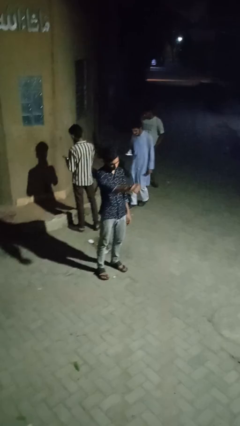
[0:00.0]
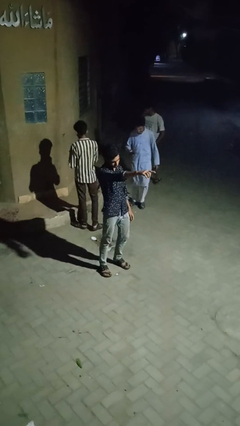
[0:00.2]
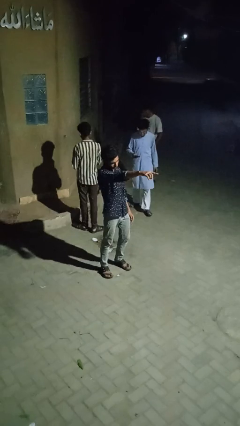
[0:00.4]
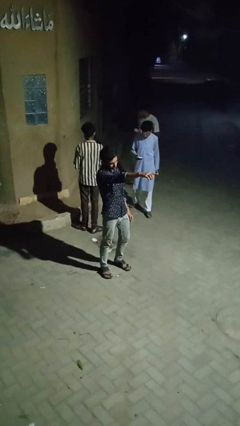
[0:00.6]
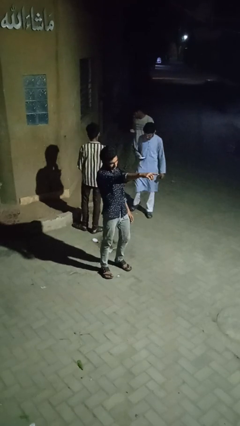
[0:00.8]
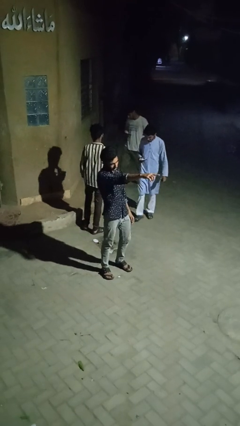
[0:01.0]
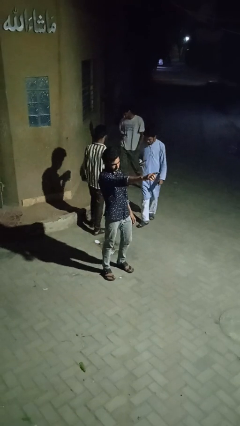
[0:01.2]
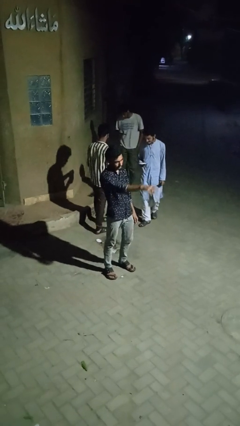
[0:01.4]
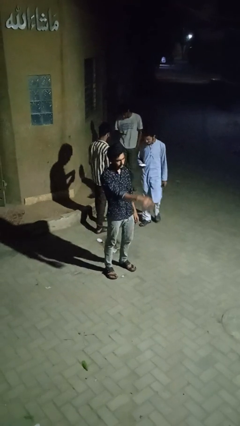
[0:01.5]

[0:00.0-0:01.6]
person points at person

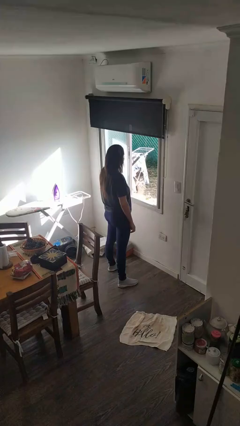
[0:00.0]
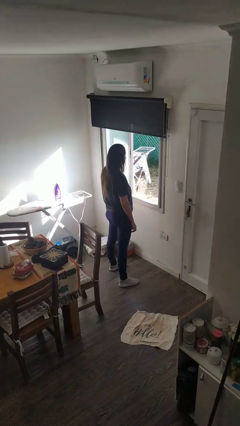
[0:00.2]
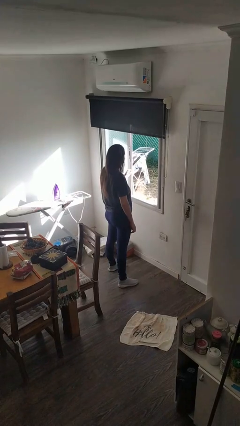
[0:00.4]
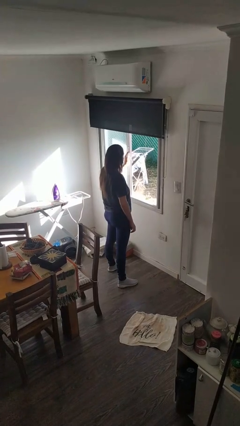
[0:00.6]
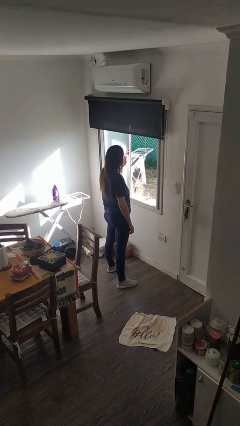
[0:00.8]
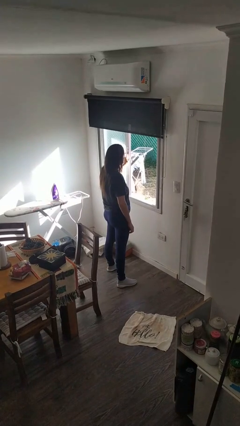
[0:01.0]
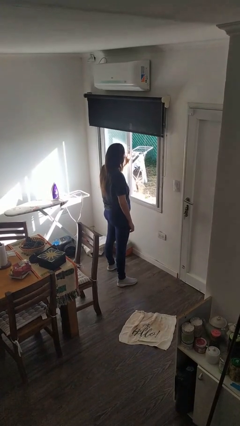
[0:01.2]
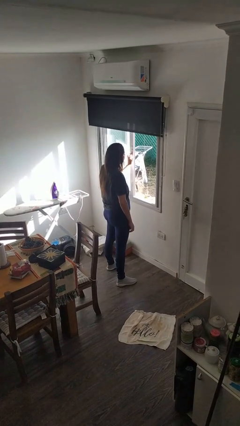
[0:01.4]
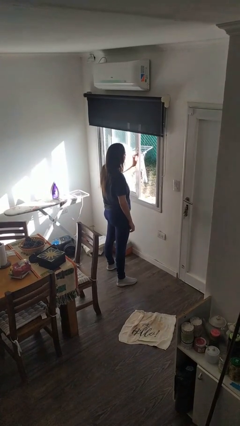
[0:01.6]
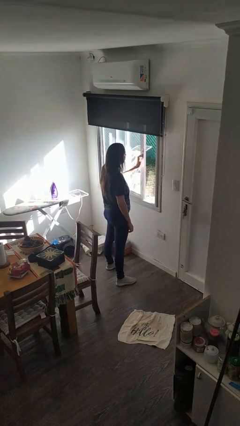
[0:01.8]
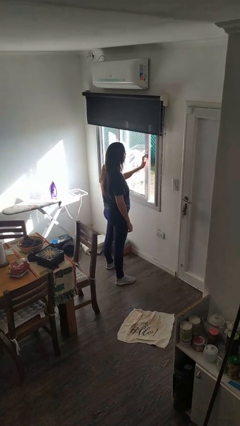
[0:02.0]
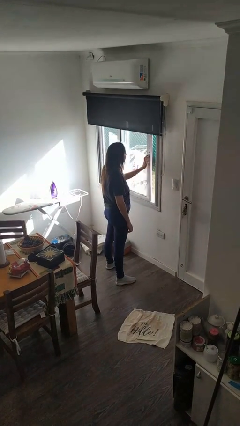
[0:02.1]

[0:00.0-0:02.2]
person closes home window

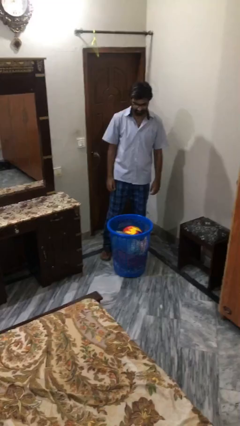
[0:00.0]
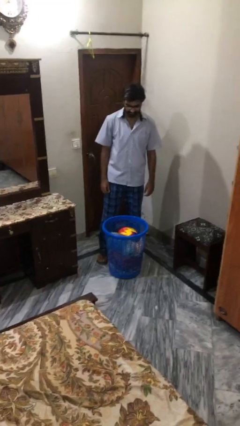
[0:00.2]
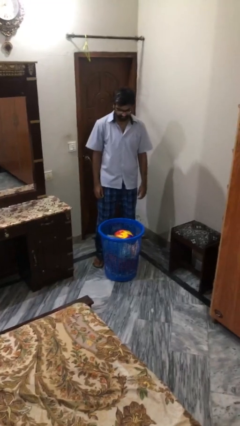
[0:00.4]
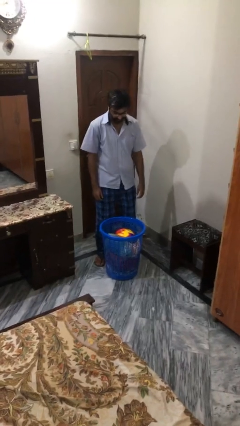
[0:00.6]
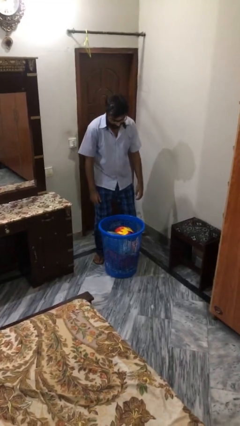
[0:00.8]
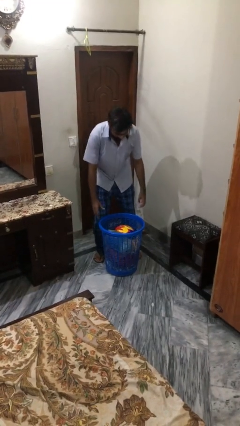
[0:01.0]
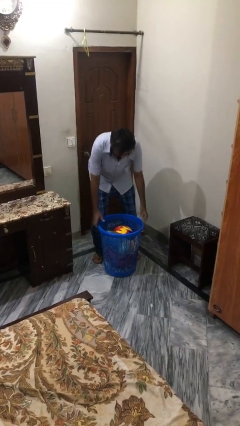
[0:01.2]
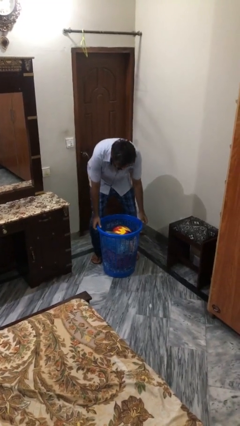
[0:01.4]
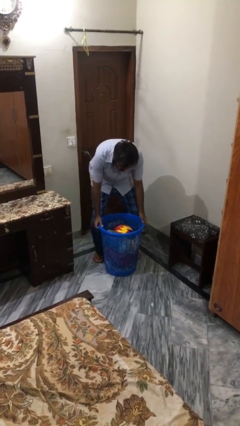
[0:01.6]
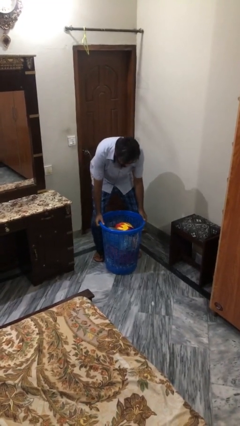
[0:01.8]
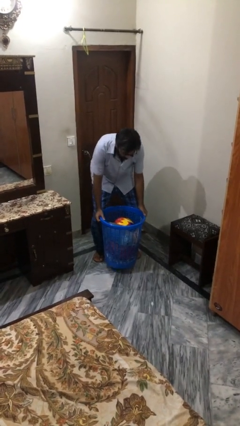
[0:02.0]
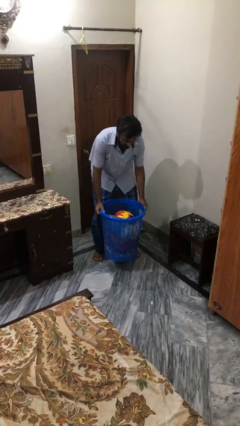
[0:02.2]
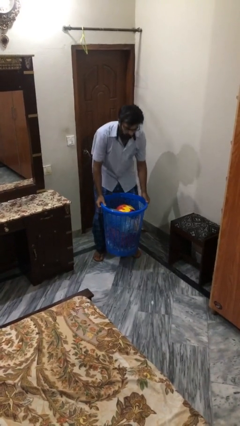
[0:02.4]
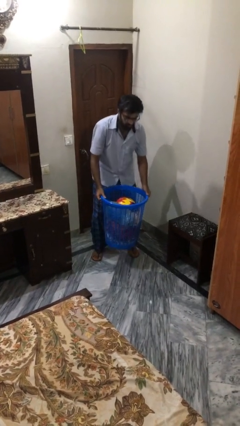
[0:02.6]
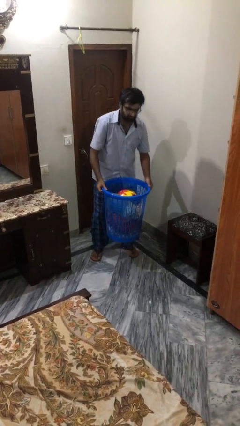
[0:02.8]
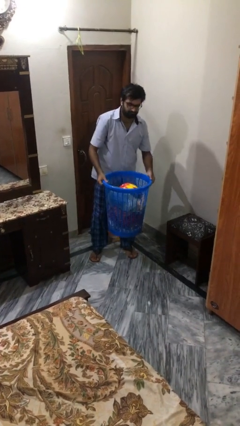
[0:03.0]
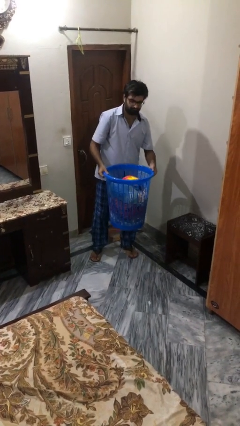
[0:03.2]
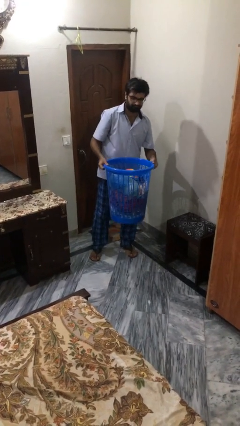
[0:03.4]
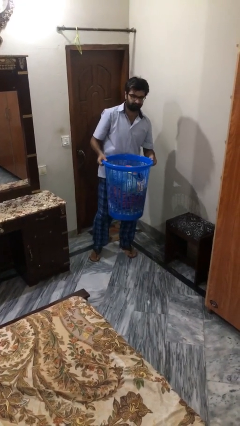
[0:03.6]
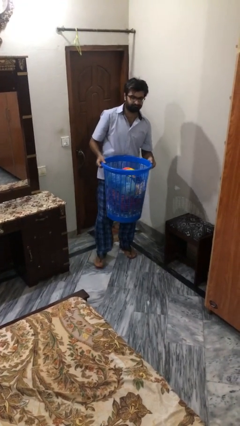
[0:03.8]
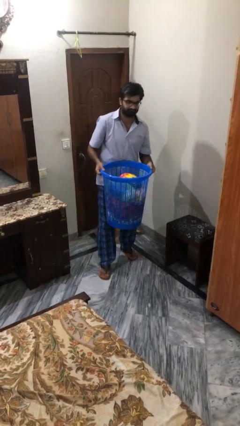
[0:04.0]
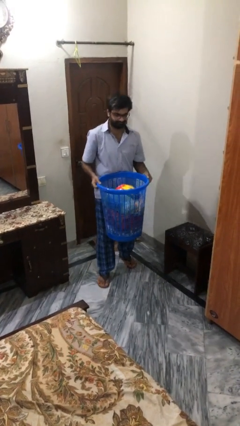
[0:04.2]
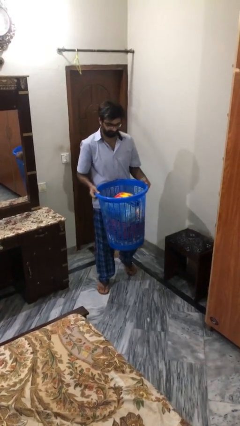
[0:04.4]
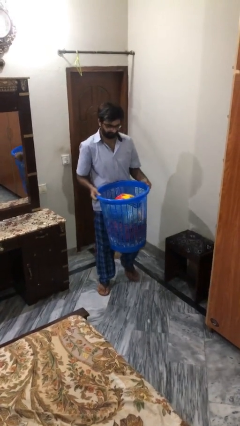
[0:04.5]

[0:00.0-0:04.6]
person picks up object from floor

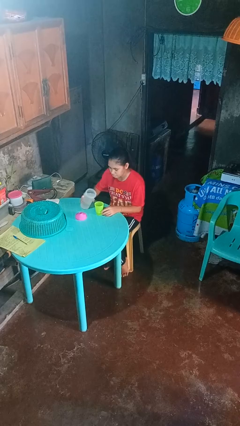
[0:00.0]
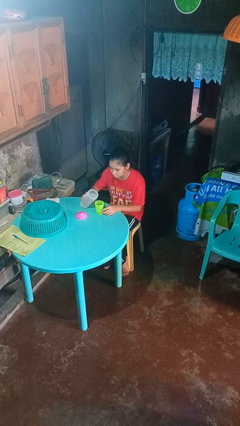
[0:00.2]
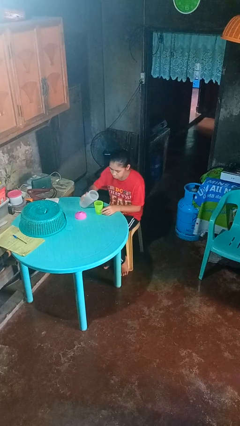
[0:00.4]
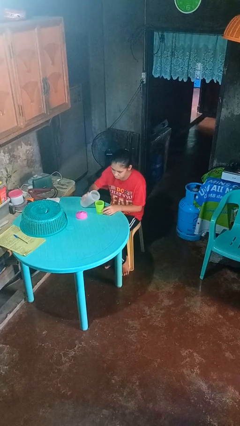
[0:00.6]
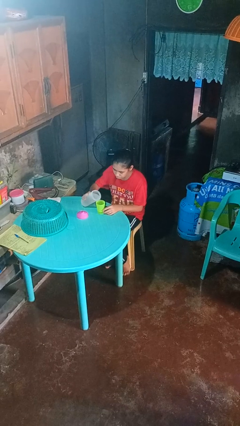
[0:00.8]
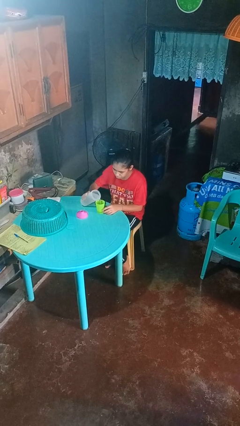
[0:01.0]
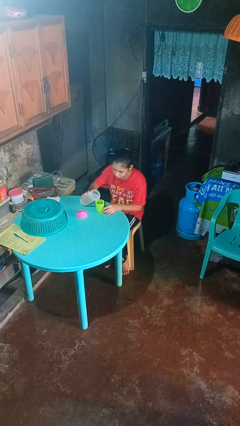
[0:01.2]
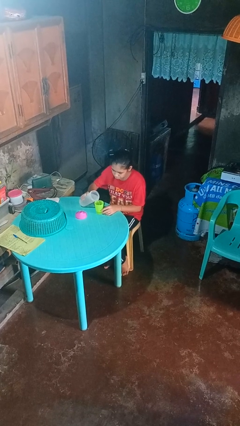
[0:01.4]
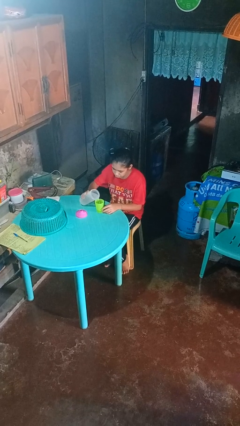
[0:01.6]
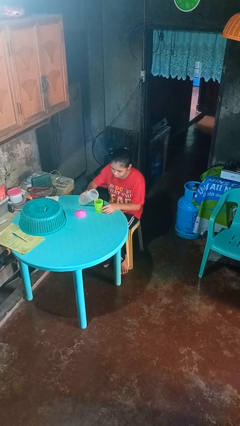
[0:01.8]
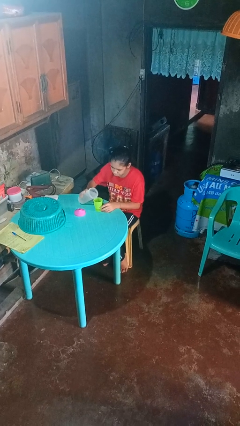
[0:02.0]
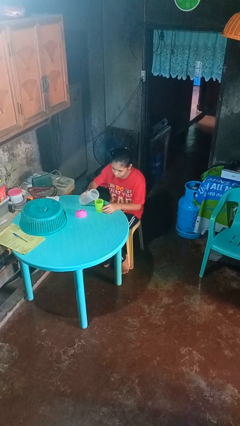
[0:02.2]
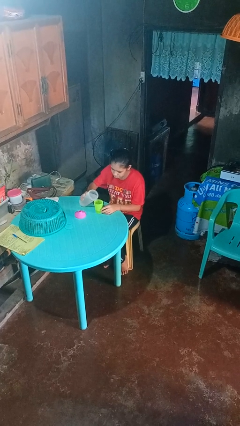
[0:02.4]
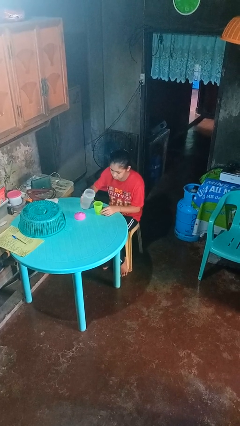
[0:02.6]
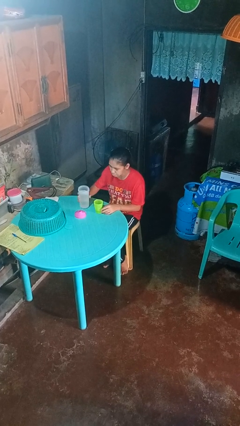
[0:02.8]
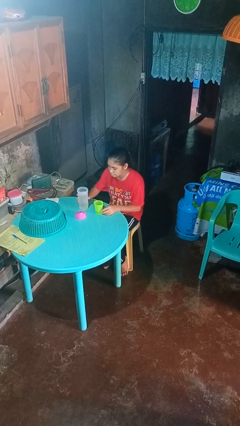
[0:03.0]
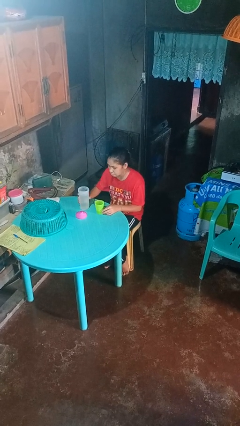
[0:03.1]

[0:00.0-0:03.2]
person pours liquid into cup

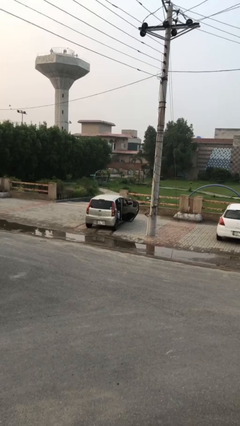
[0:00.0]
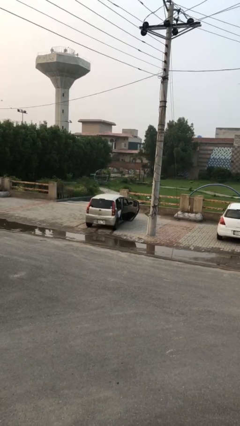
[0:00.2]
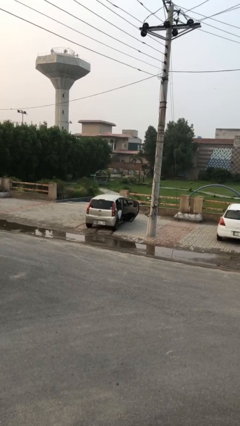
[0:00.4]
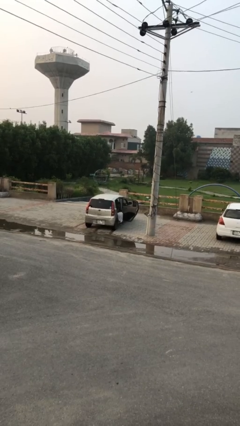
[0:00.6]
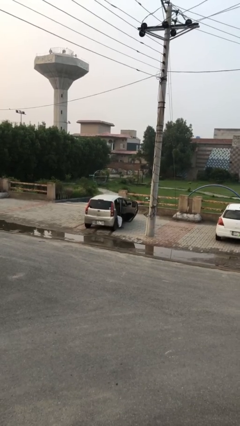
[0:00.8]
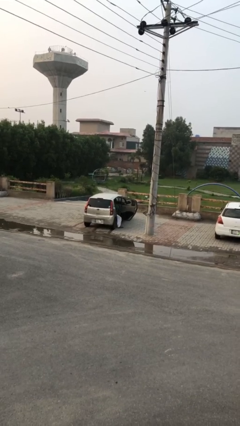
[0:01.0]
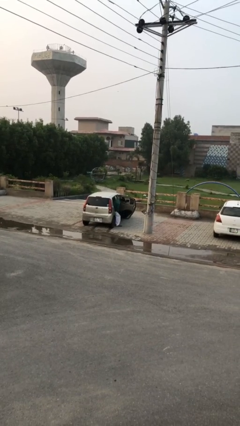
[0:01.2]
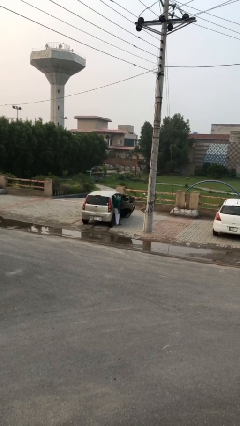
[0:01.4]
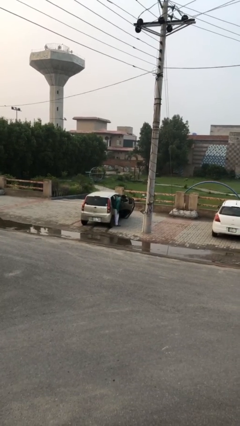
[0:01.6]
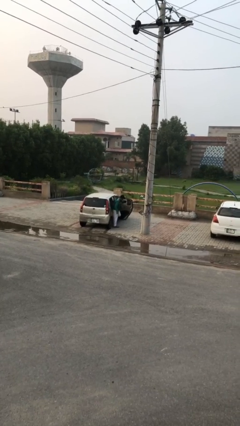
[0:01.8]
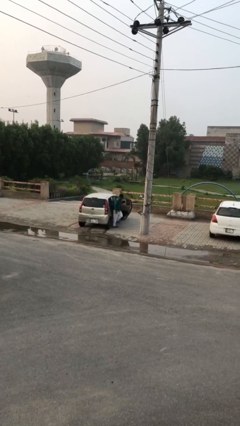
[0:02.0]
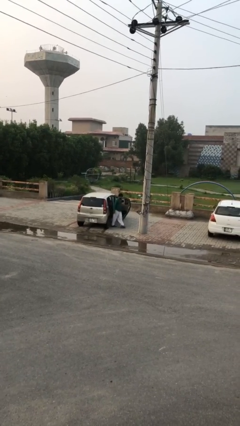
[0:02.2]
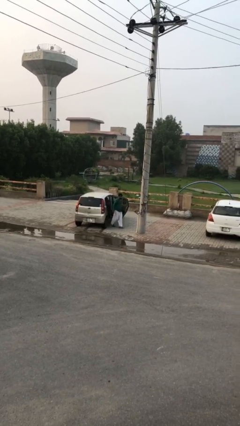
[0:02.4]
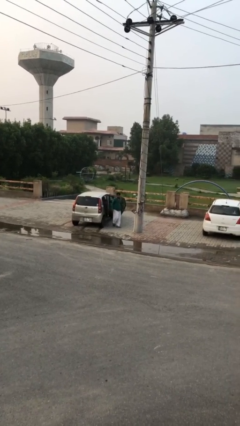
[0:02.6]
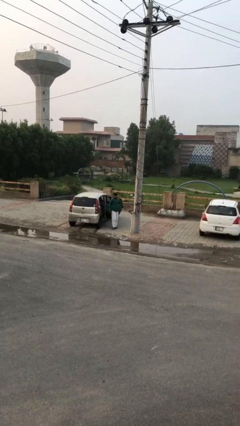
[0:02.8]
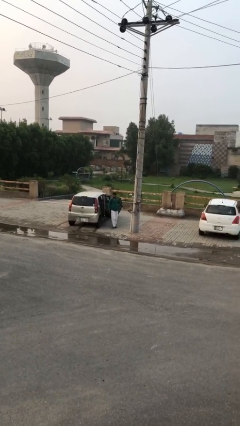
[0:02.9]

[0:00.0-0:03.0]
person exits car

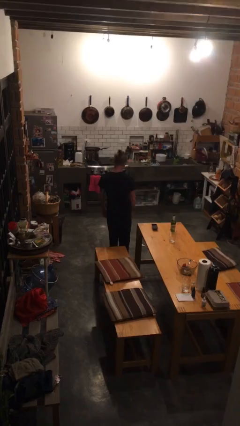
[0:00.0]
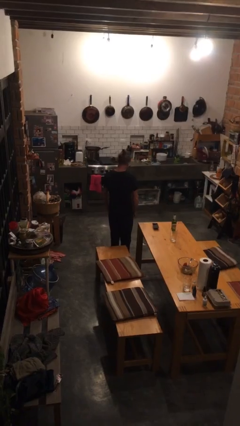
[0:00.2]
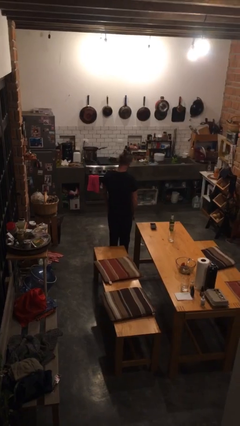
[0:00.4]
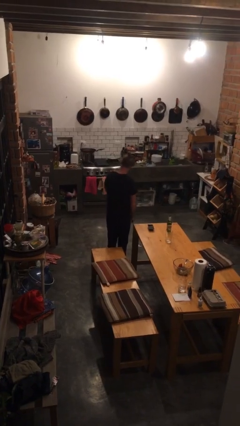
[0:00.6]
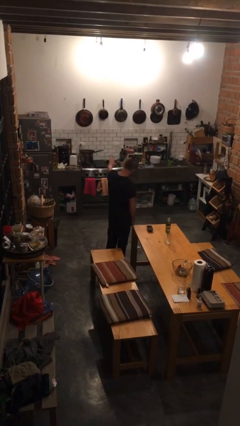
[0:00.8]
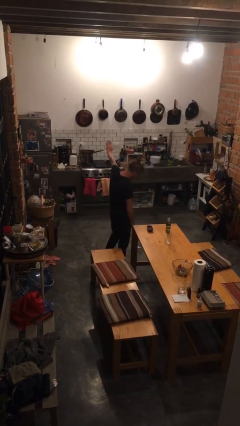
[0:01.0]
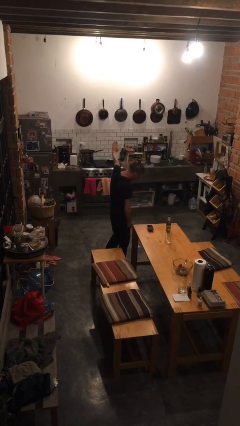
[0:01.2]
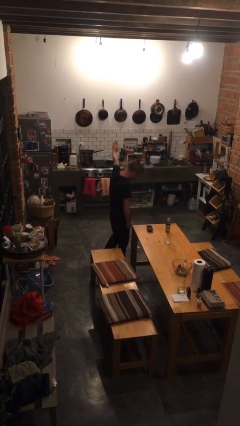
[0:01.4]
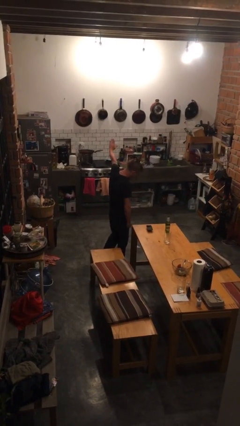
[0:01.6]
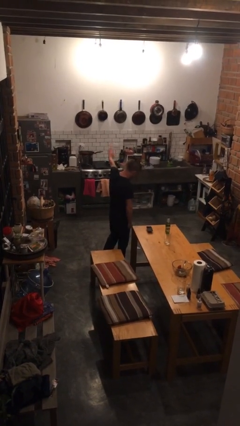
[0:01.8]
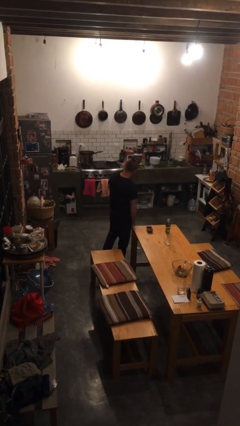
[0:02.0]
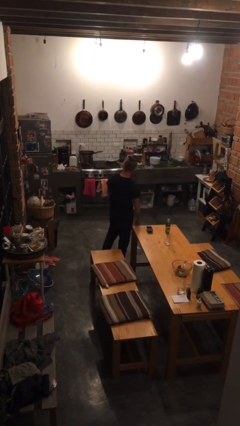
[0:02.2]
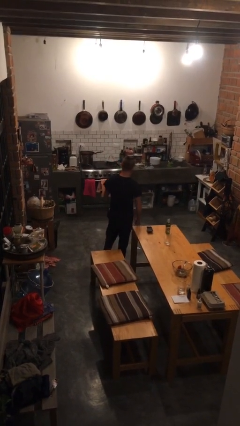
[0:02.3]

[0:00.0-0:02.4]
person gestures stop

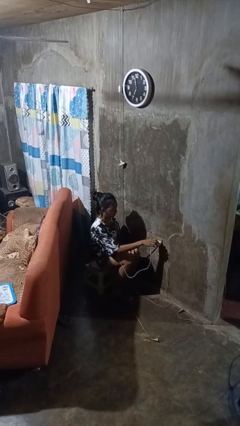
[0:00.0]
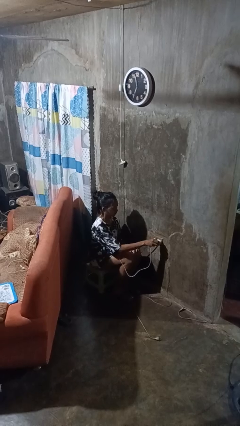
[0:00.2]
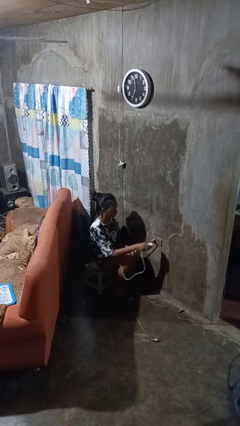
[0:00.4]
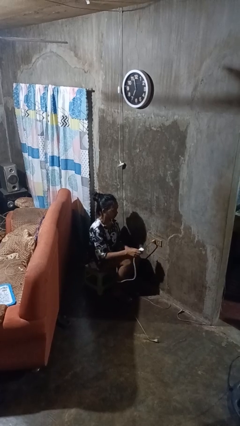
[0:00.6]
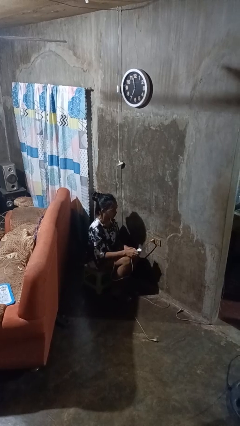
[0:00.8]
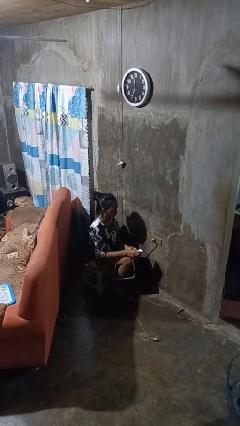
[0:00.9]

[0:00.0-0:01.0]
person unplugs from electrical socket
